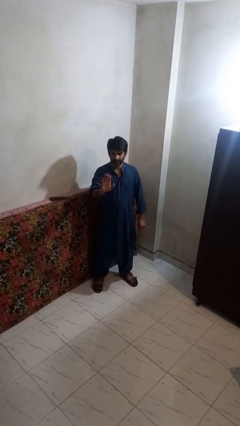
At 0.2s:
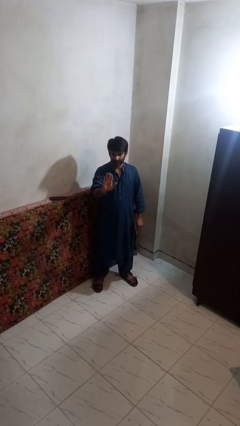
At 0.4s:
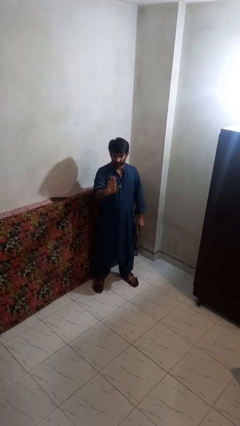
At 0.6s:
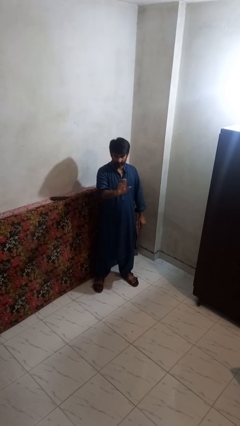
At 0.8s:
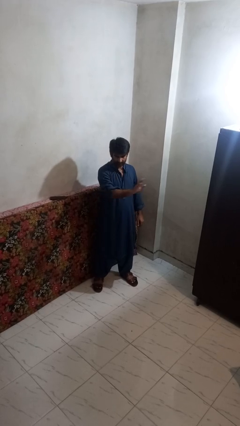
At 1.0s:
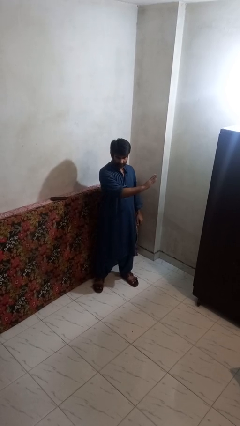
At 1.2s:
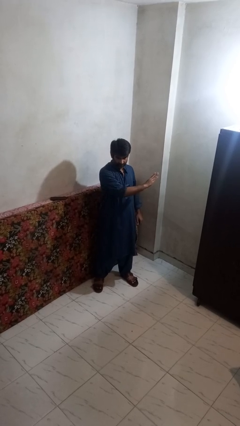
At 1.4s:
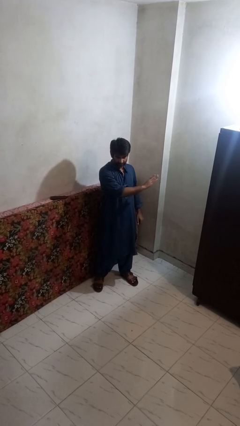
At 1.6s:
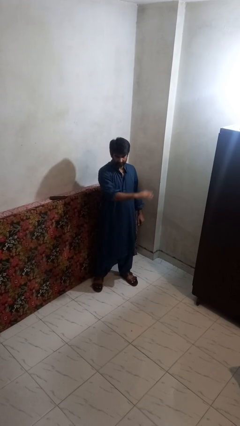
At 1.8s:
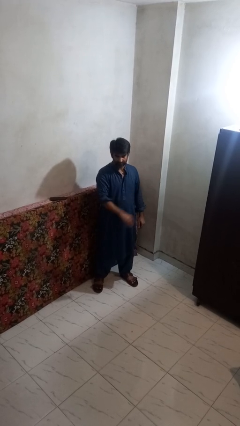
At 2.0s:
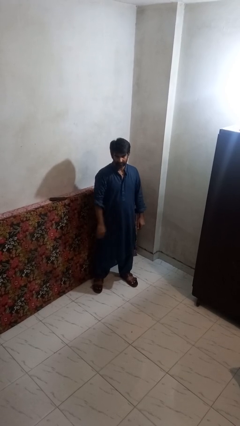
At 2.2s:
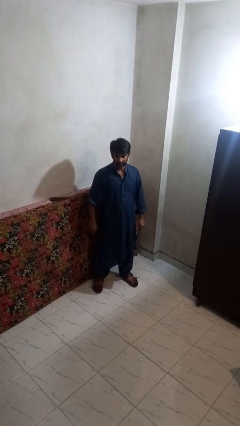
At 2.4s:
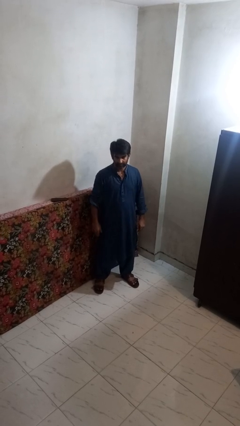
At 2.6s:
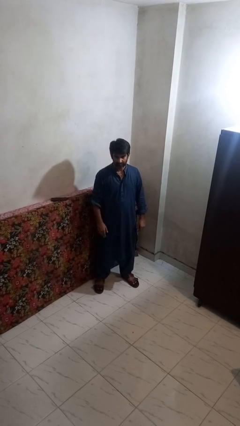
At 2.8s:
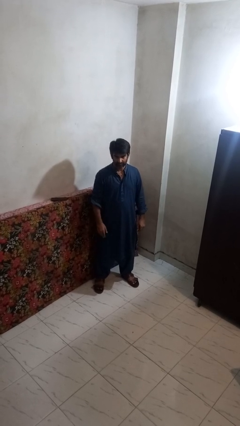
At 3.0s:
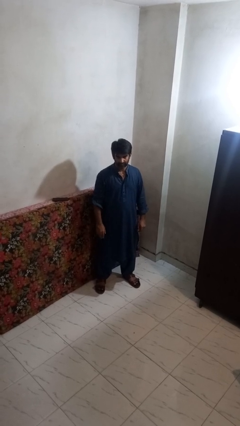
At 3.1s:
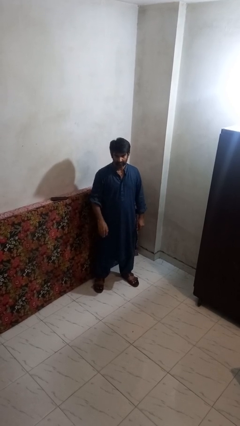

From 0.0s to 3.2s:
person gestures swipe left

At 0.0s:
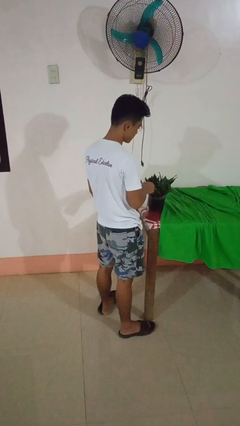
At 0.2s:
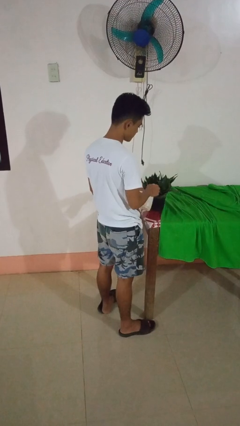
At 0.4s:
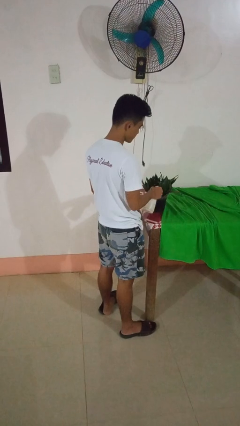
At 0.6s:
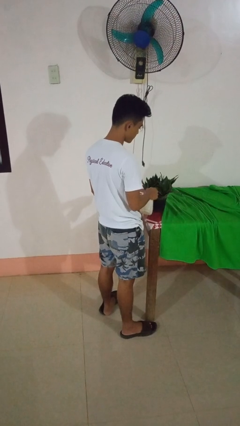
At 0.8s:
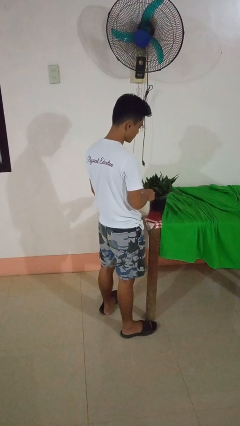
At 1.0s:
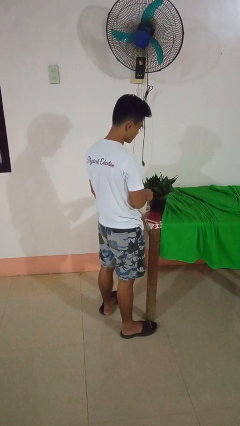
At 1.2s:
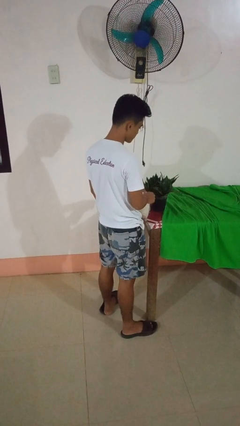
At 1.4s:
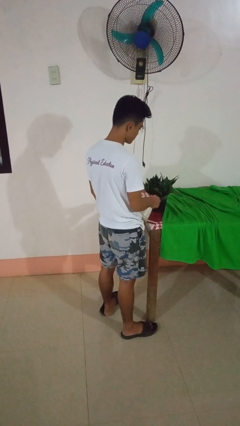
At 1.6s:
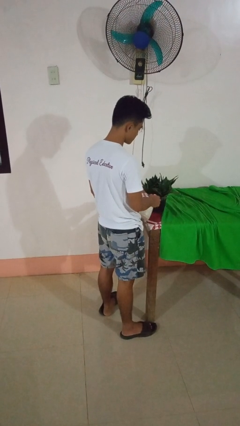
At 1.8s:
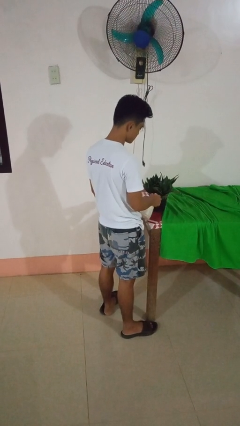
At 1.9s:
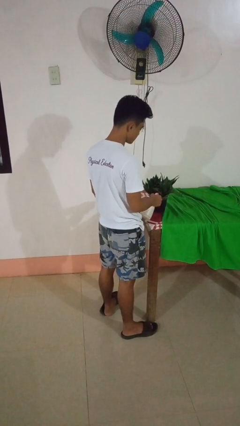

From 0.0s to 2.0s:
person waters houseplant

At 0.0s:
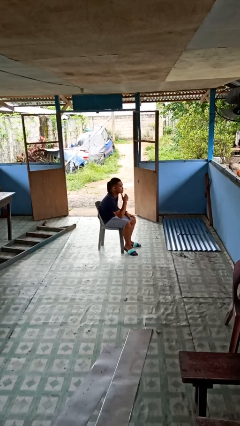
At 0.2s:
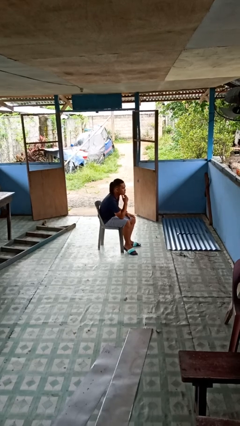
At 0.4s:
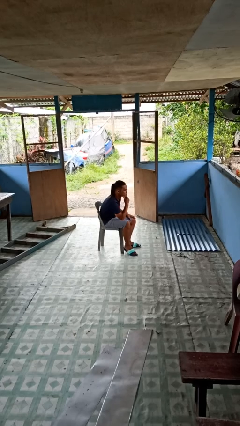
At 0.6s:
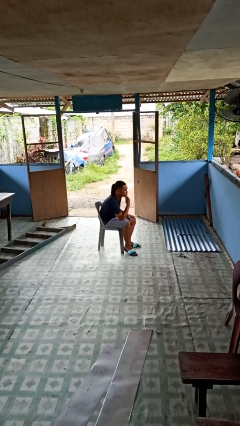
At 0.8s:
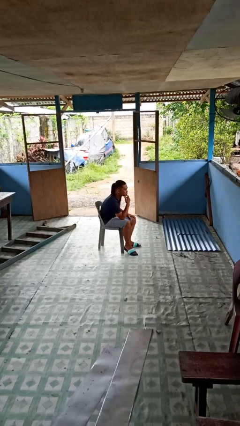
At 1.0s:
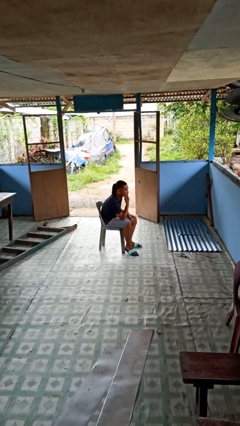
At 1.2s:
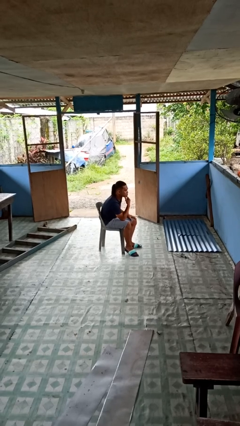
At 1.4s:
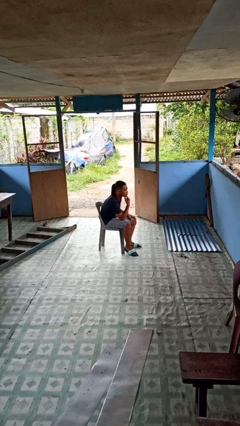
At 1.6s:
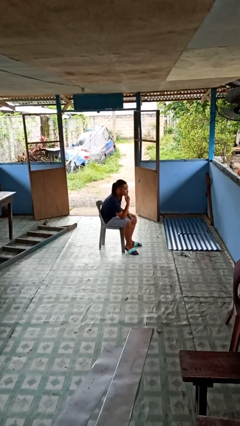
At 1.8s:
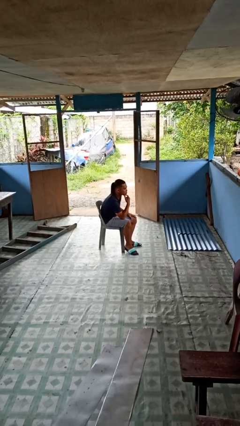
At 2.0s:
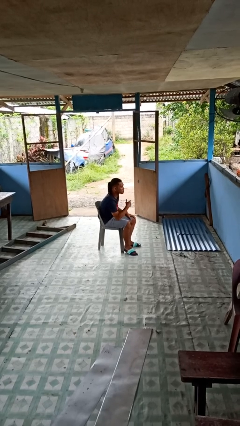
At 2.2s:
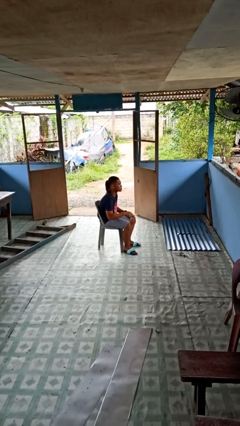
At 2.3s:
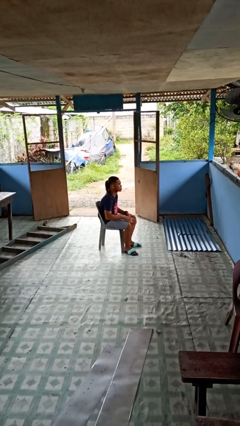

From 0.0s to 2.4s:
person strokes chin

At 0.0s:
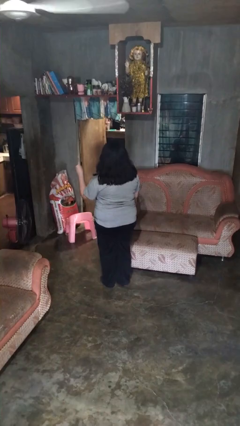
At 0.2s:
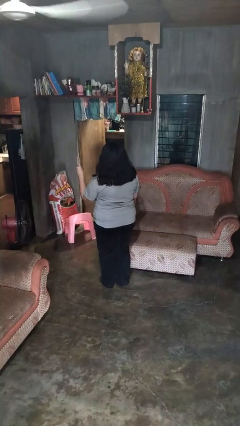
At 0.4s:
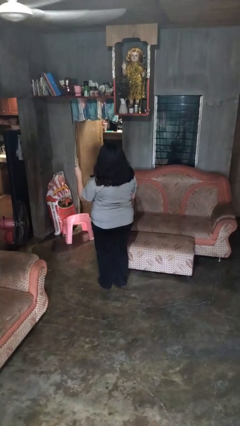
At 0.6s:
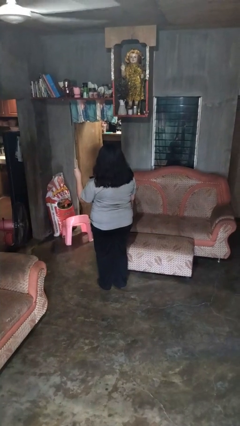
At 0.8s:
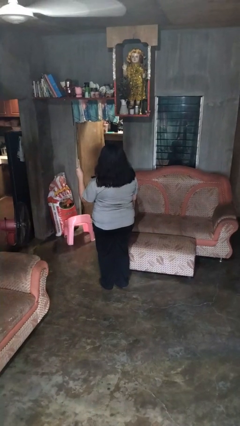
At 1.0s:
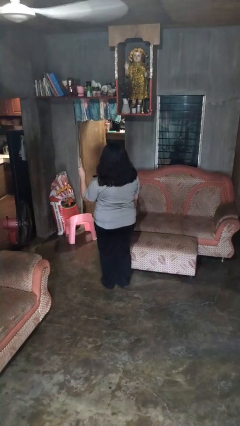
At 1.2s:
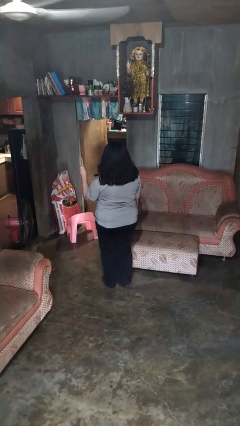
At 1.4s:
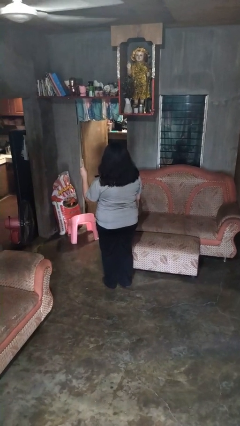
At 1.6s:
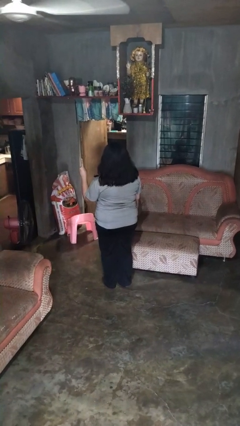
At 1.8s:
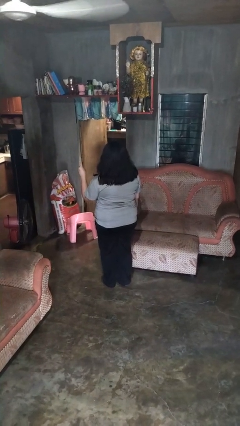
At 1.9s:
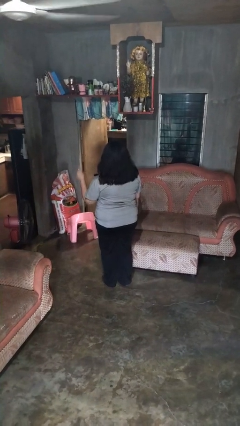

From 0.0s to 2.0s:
person gestures number one

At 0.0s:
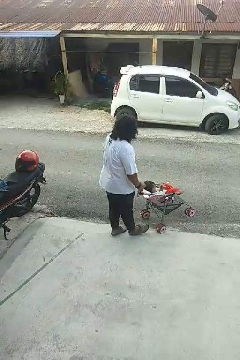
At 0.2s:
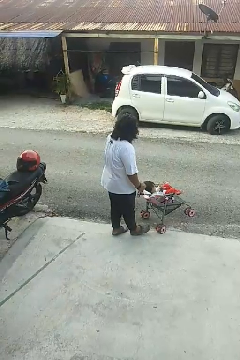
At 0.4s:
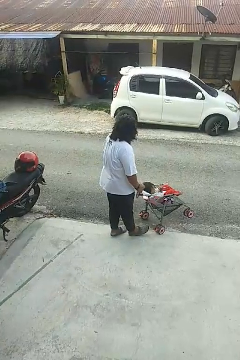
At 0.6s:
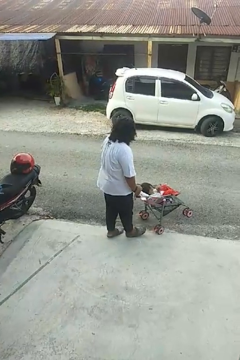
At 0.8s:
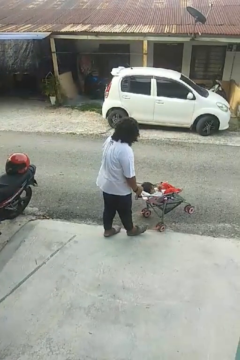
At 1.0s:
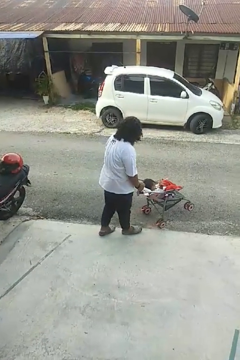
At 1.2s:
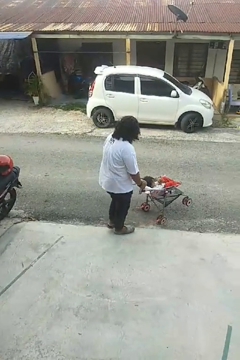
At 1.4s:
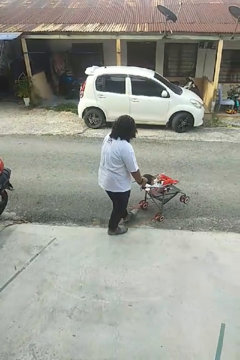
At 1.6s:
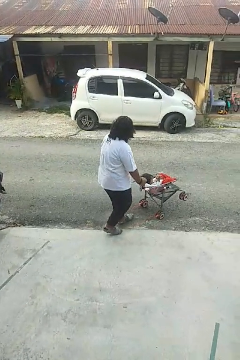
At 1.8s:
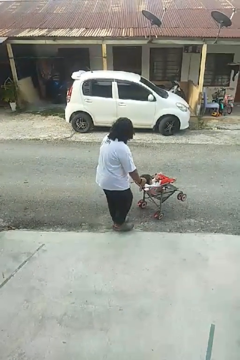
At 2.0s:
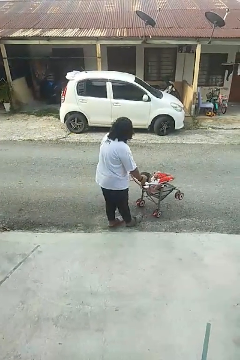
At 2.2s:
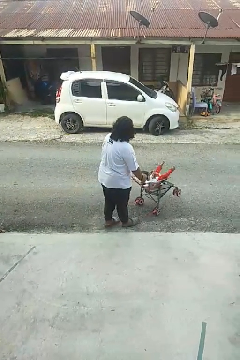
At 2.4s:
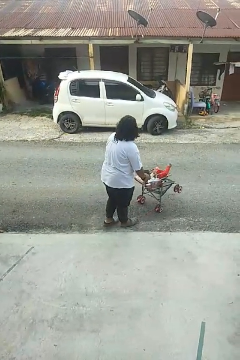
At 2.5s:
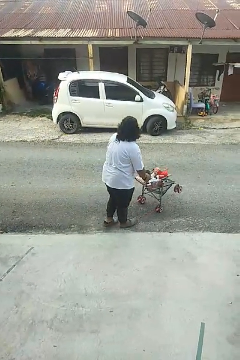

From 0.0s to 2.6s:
person pushes wheeled cart

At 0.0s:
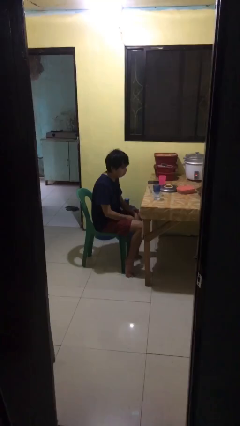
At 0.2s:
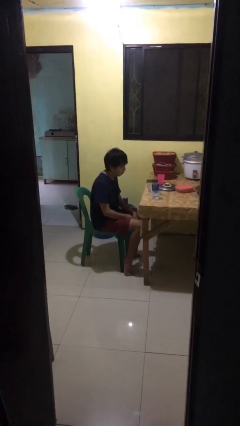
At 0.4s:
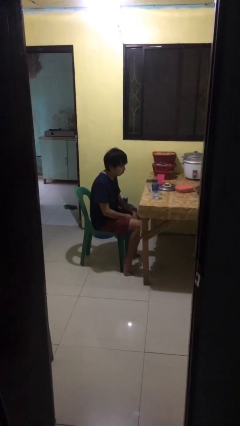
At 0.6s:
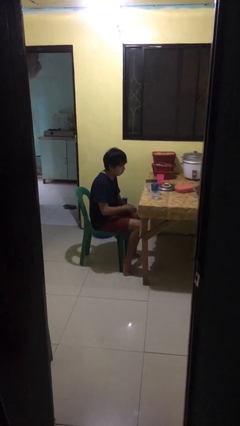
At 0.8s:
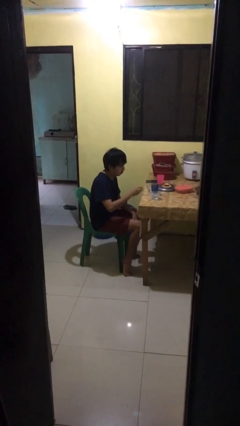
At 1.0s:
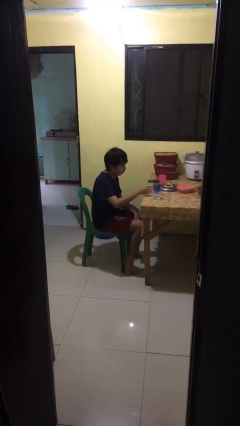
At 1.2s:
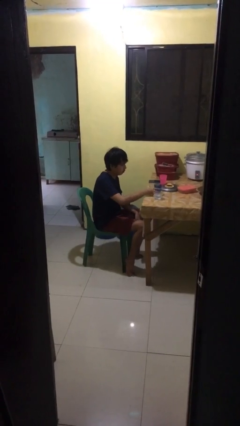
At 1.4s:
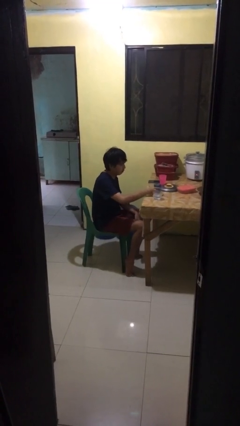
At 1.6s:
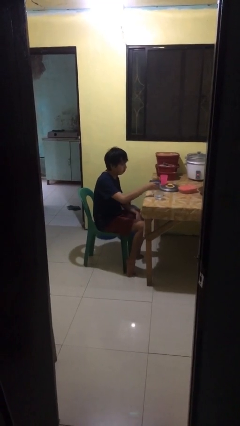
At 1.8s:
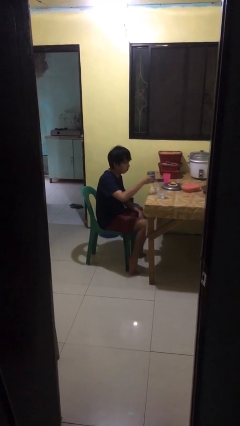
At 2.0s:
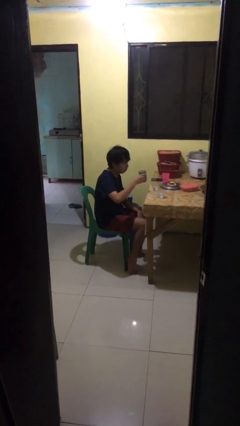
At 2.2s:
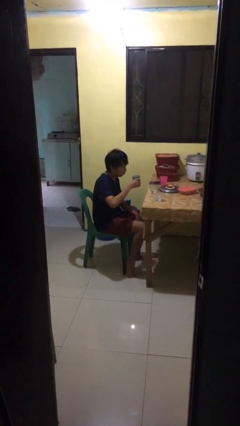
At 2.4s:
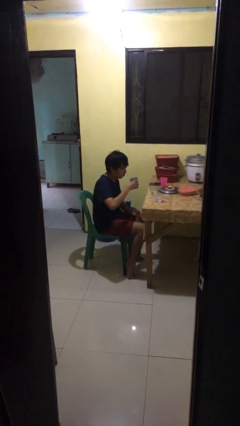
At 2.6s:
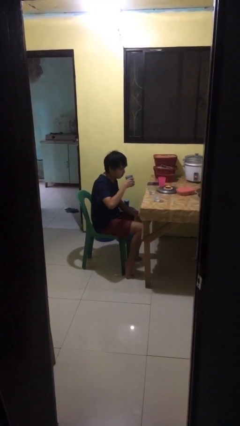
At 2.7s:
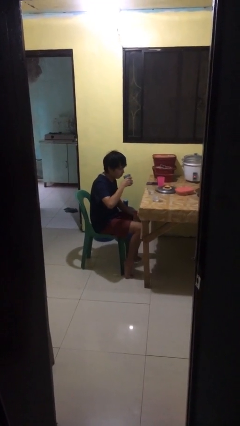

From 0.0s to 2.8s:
person picks up object from table

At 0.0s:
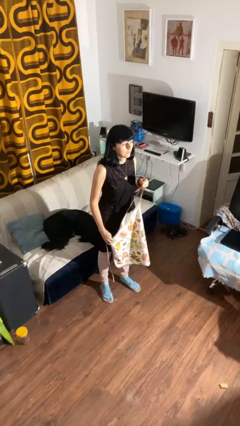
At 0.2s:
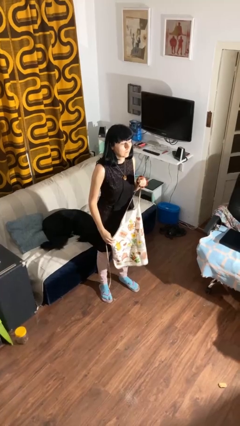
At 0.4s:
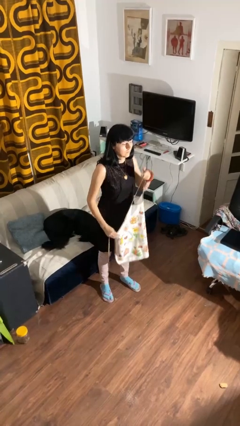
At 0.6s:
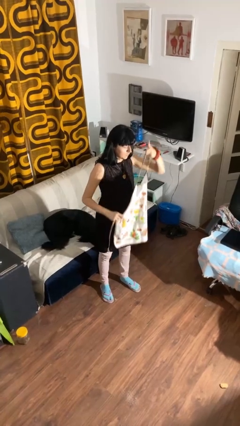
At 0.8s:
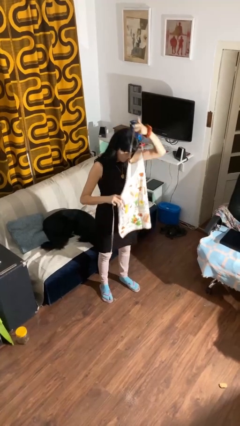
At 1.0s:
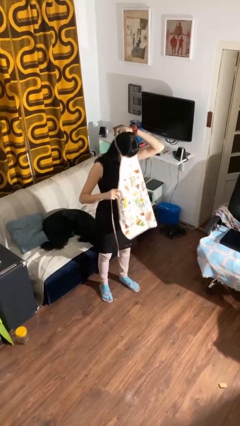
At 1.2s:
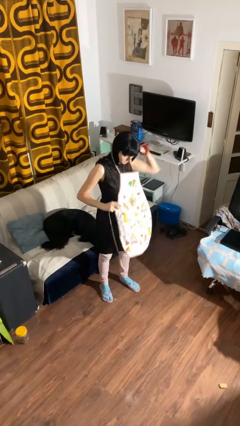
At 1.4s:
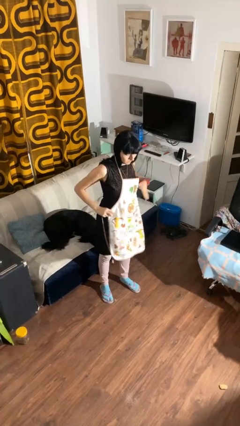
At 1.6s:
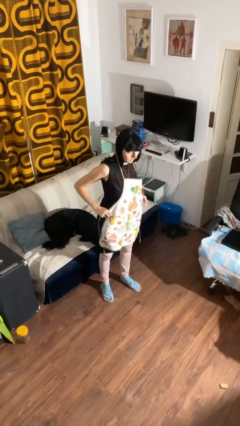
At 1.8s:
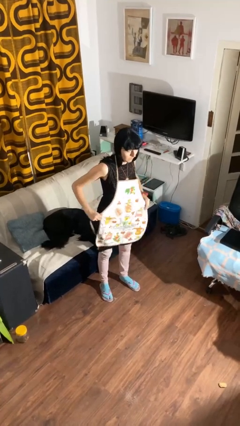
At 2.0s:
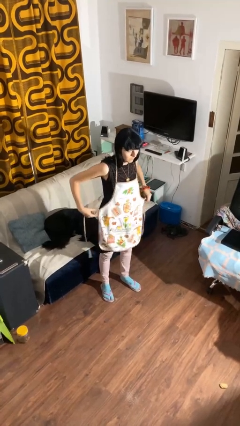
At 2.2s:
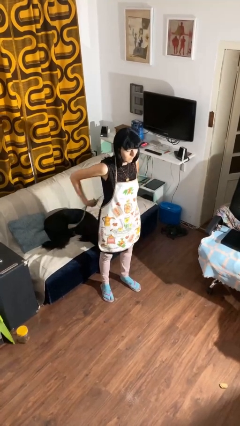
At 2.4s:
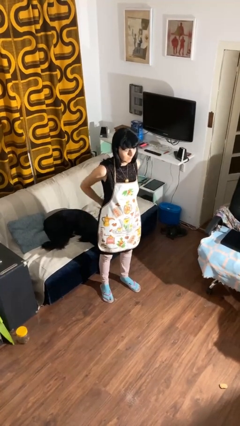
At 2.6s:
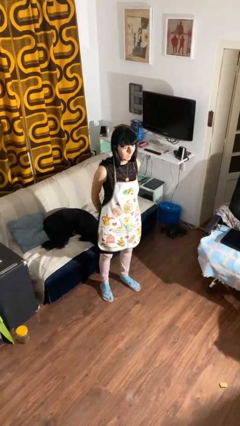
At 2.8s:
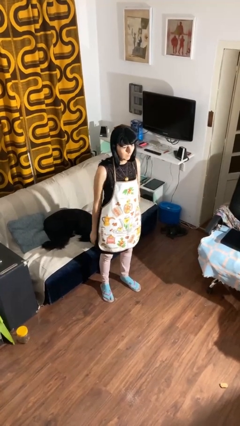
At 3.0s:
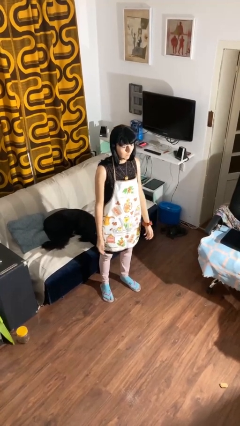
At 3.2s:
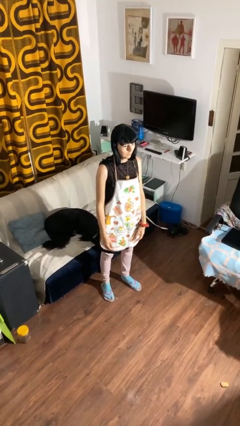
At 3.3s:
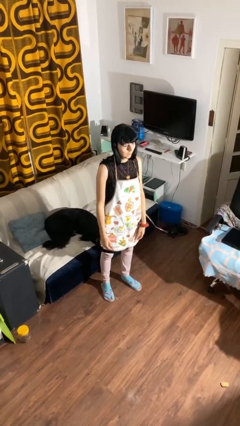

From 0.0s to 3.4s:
person puts on apron
